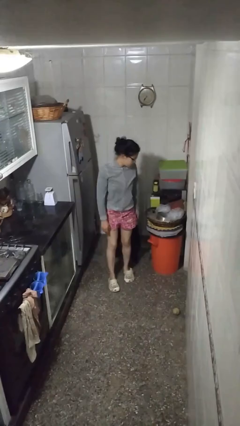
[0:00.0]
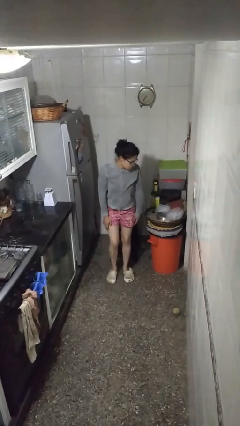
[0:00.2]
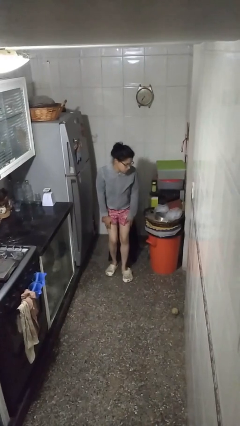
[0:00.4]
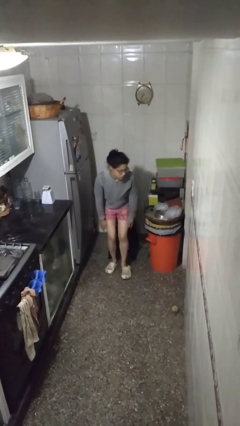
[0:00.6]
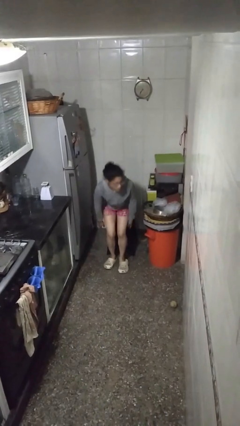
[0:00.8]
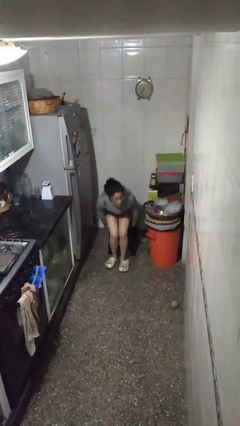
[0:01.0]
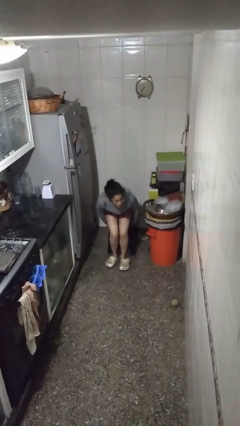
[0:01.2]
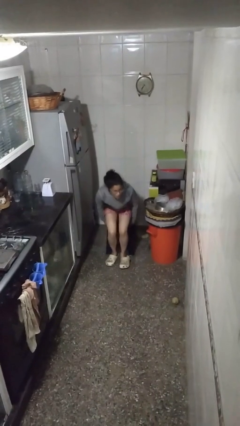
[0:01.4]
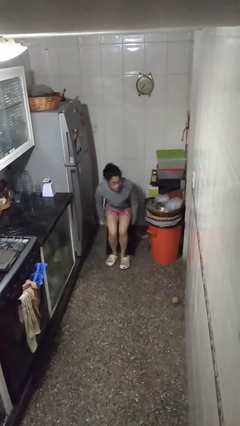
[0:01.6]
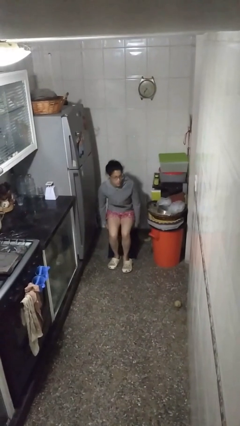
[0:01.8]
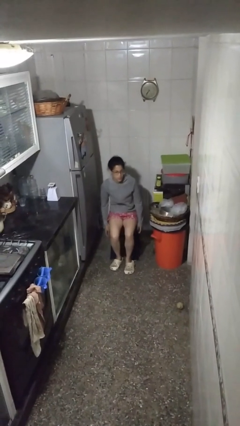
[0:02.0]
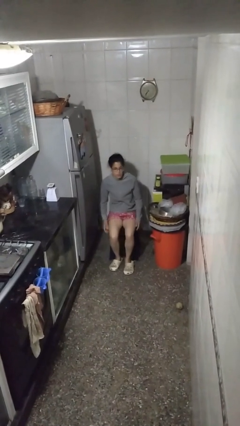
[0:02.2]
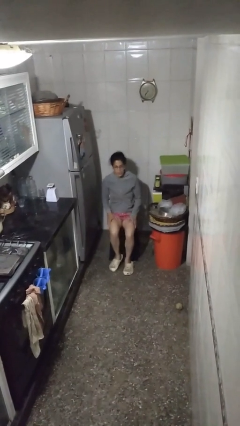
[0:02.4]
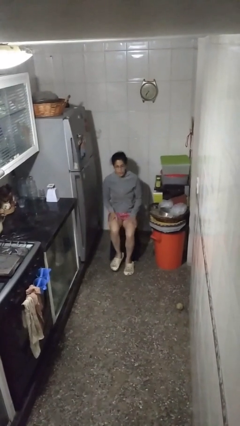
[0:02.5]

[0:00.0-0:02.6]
person sits down

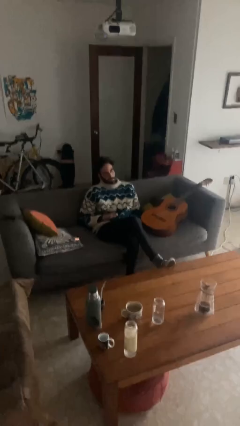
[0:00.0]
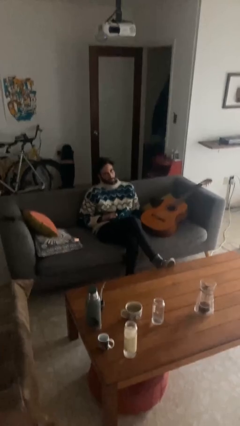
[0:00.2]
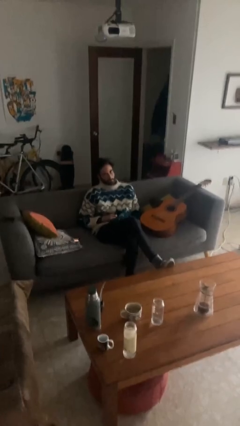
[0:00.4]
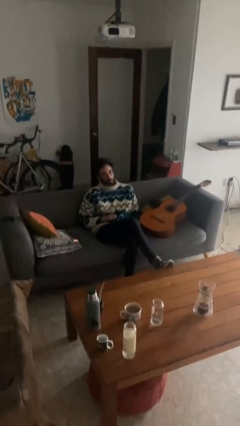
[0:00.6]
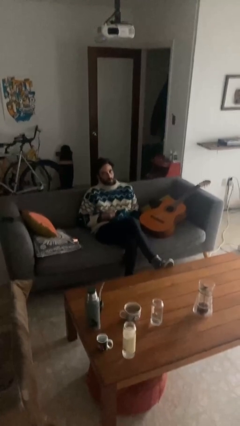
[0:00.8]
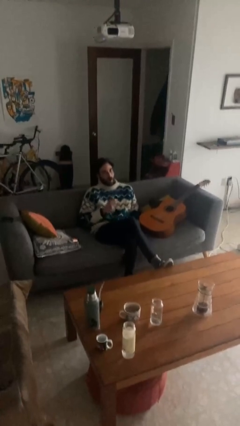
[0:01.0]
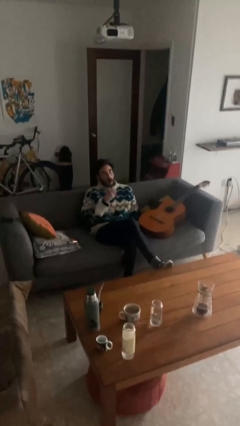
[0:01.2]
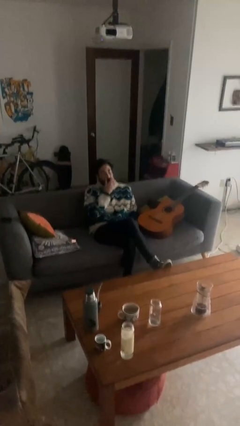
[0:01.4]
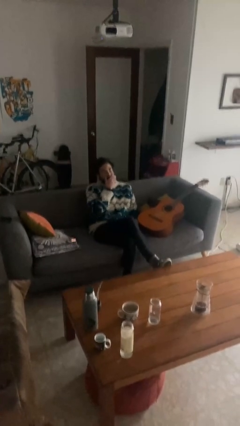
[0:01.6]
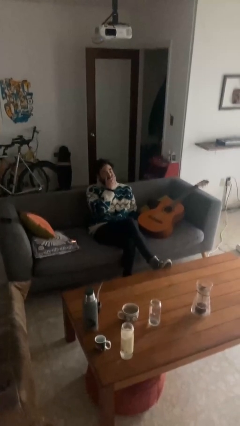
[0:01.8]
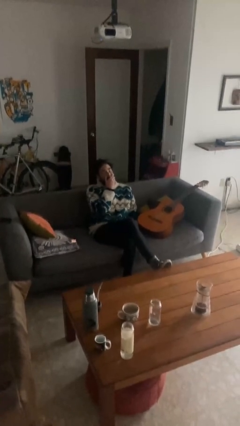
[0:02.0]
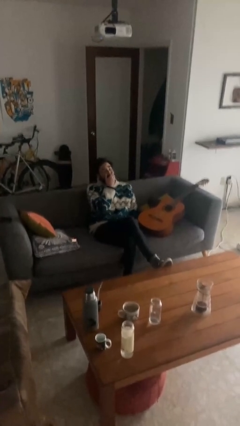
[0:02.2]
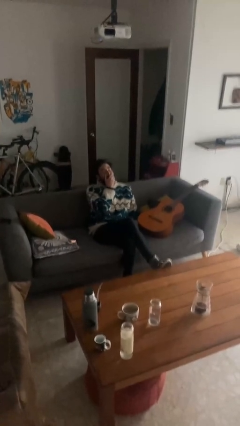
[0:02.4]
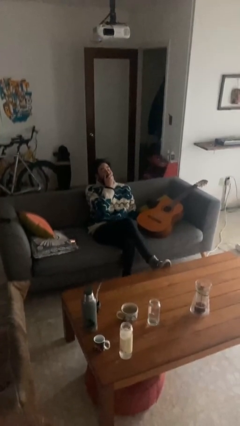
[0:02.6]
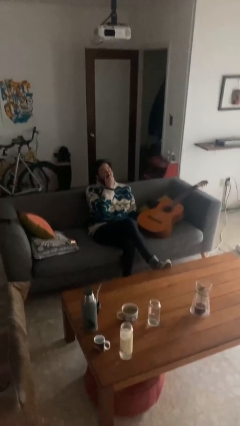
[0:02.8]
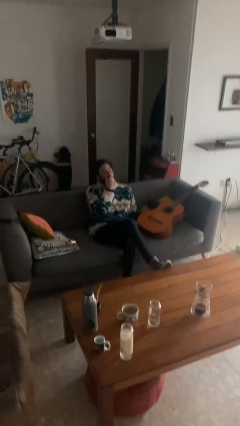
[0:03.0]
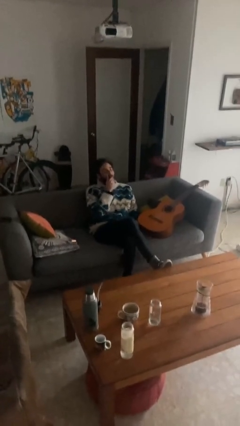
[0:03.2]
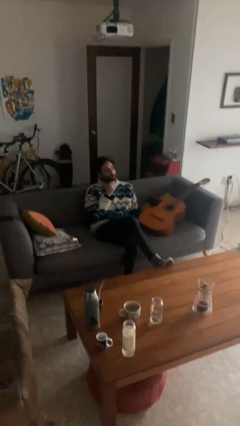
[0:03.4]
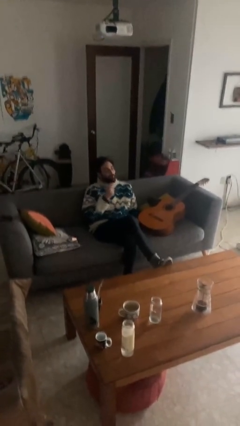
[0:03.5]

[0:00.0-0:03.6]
person yawns

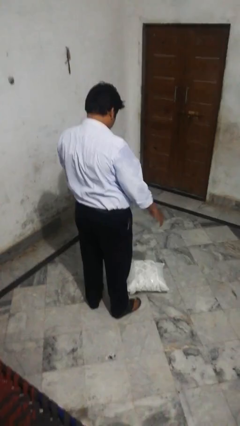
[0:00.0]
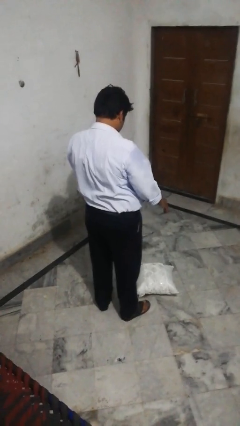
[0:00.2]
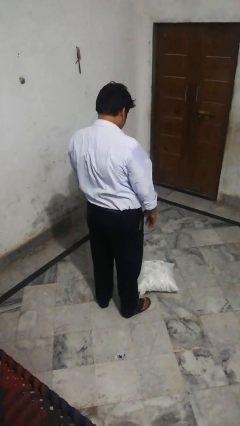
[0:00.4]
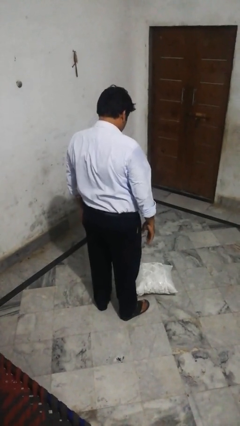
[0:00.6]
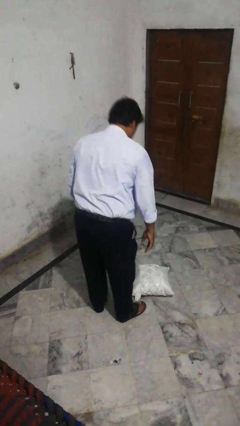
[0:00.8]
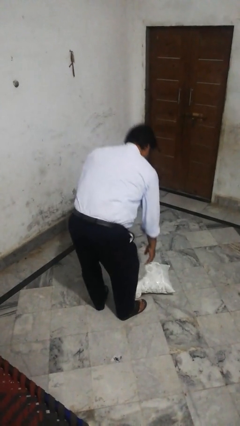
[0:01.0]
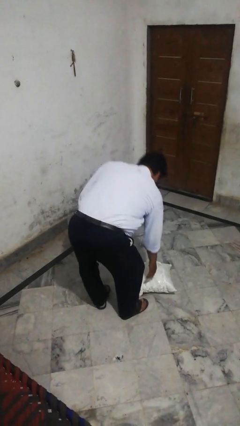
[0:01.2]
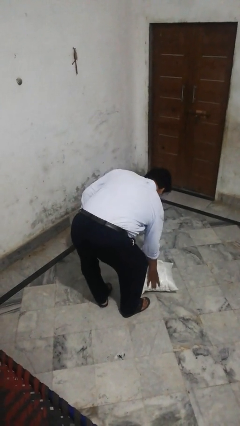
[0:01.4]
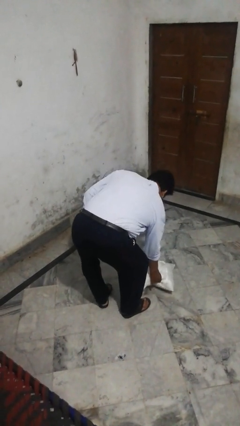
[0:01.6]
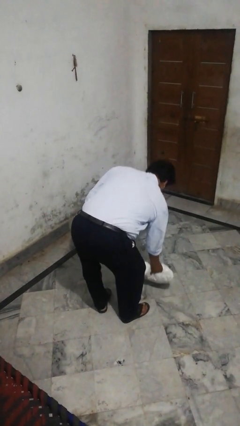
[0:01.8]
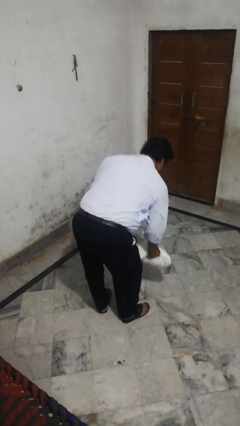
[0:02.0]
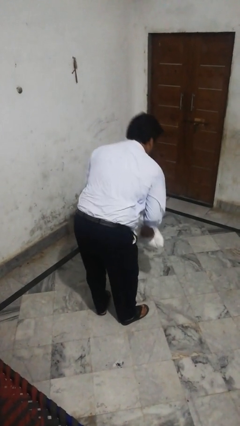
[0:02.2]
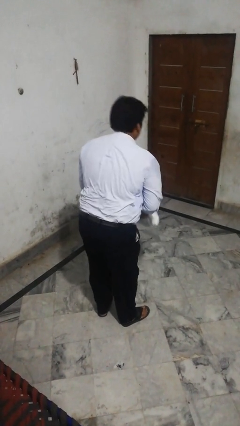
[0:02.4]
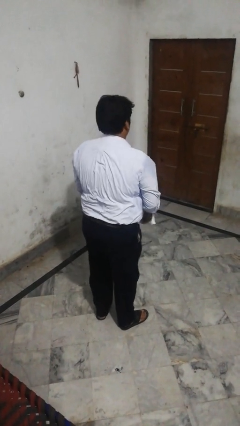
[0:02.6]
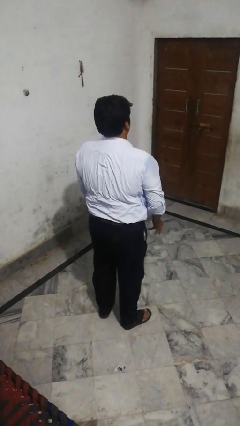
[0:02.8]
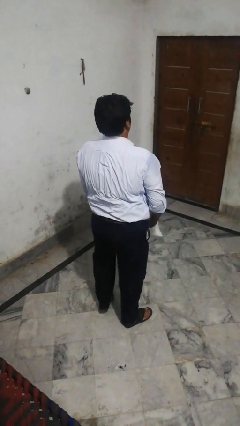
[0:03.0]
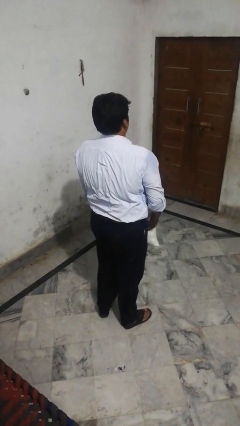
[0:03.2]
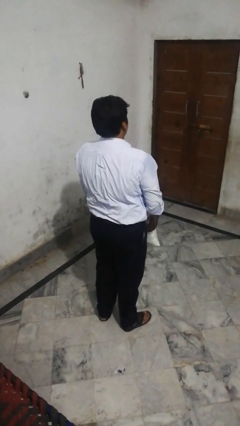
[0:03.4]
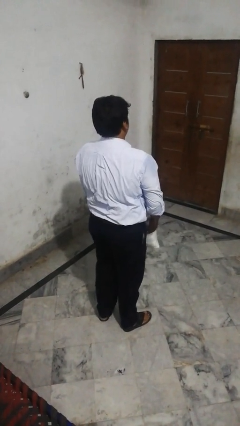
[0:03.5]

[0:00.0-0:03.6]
person picks up object from floor

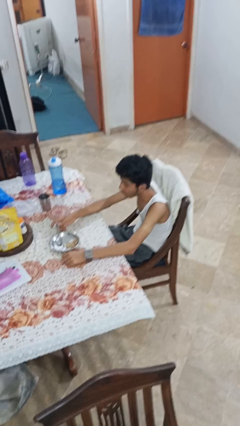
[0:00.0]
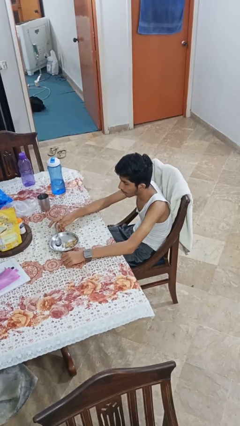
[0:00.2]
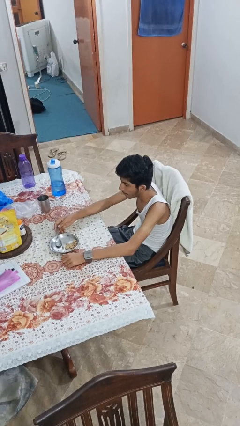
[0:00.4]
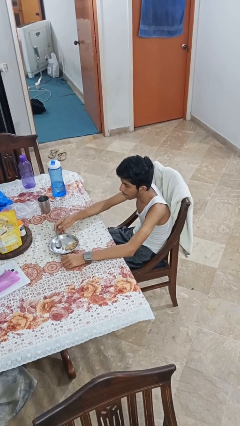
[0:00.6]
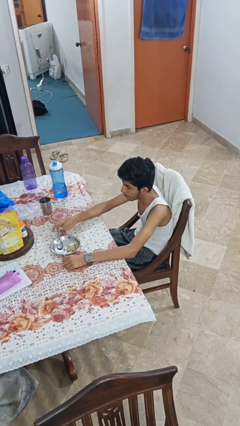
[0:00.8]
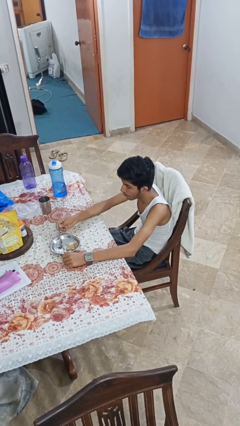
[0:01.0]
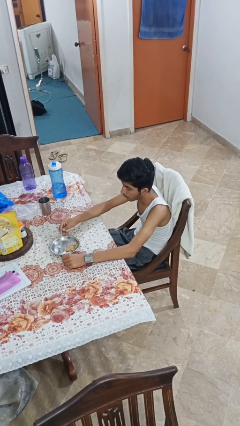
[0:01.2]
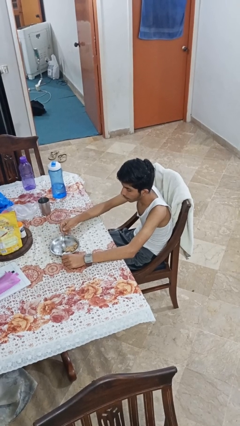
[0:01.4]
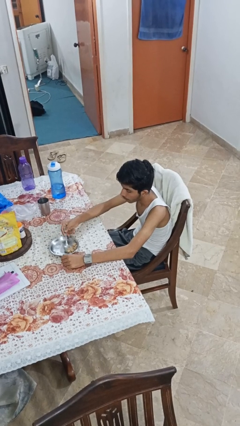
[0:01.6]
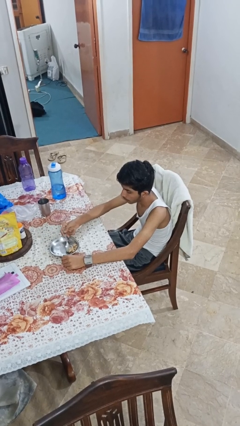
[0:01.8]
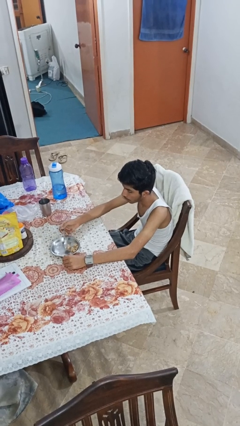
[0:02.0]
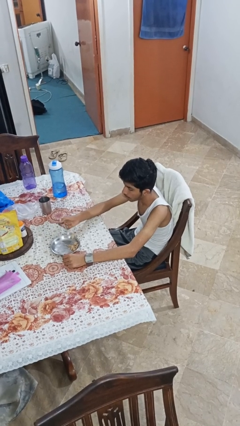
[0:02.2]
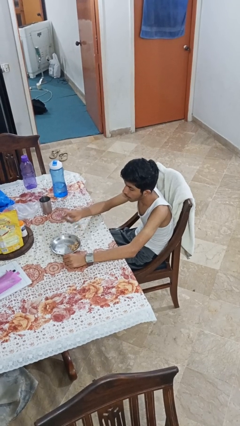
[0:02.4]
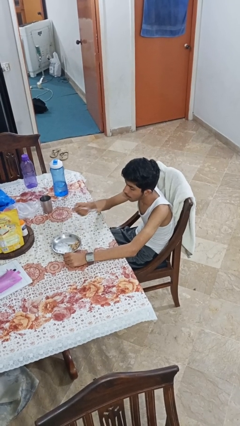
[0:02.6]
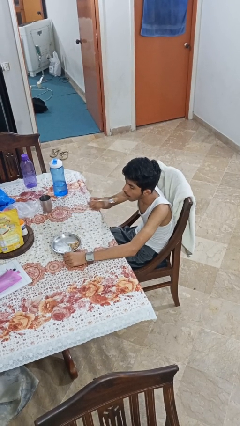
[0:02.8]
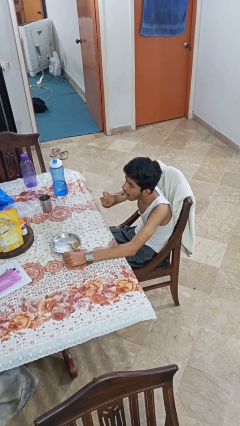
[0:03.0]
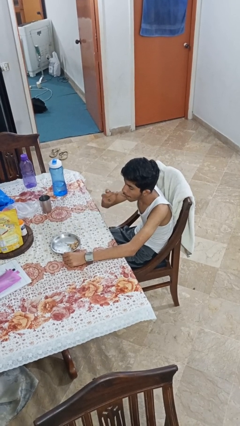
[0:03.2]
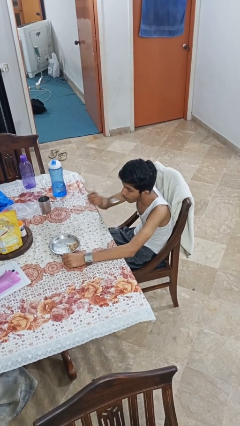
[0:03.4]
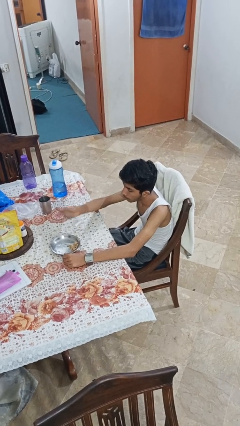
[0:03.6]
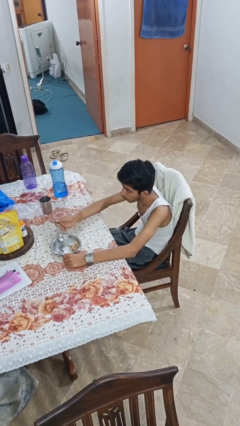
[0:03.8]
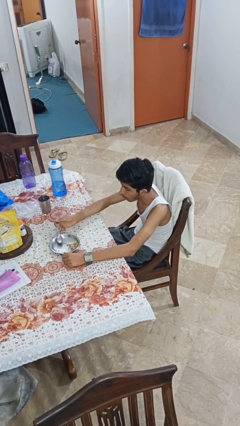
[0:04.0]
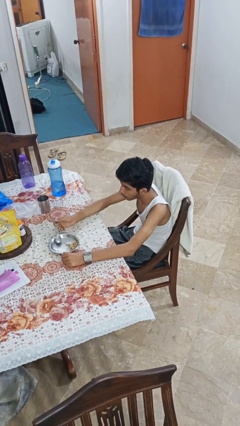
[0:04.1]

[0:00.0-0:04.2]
person eats with utensil

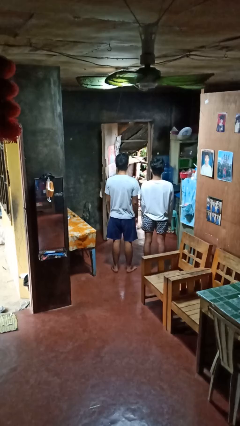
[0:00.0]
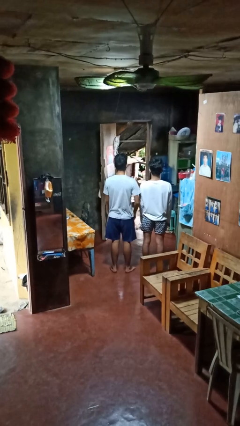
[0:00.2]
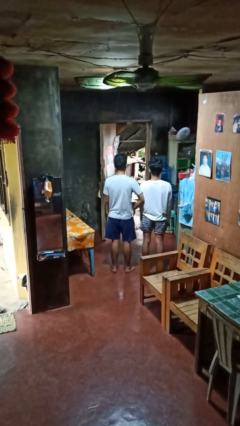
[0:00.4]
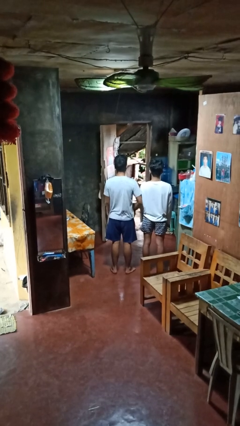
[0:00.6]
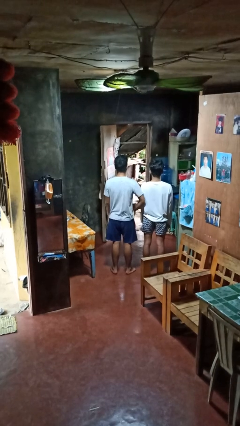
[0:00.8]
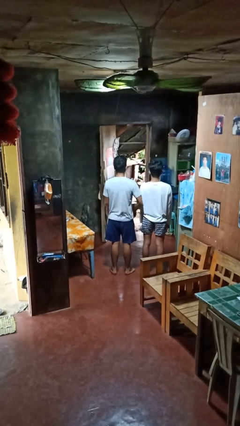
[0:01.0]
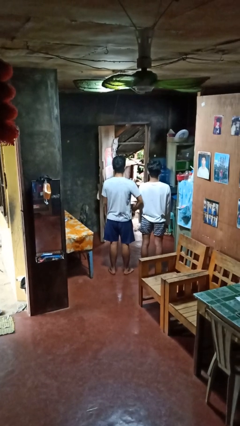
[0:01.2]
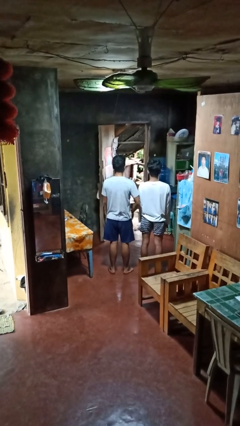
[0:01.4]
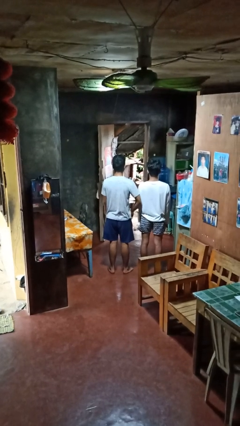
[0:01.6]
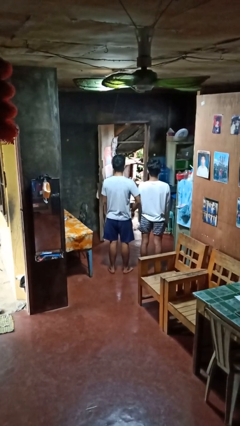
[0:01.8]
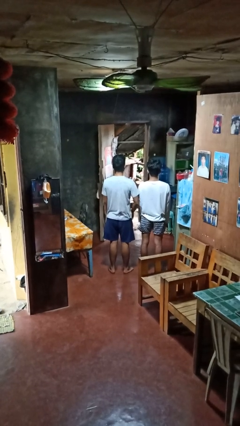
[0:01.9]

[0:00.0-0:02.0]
person nudges person with elbow

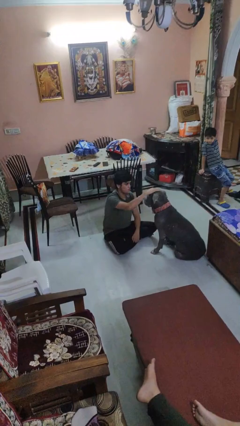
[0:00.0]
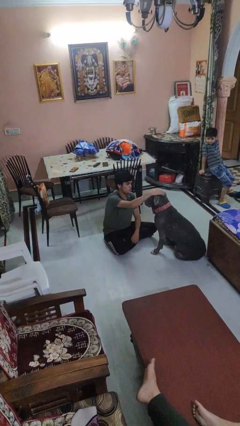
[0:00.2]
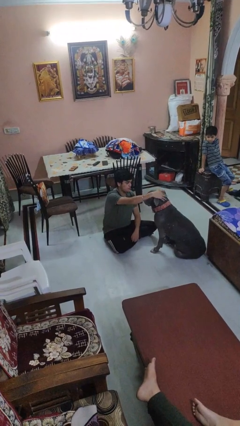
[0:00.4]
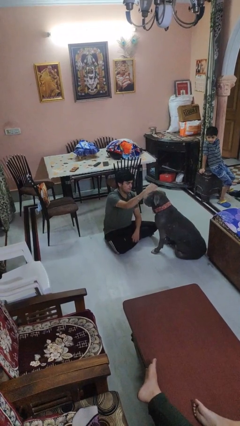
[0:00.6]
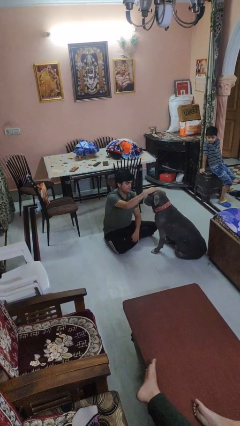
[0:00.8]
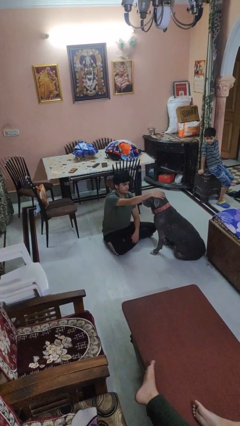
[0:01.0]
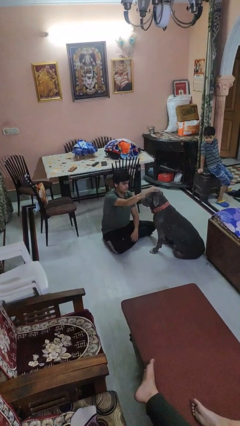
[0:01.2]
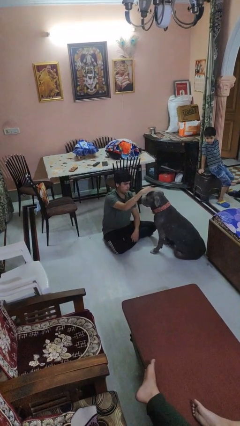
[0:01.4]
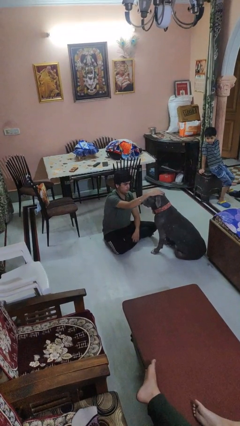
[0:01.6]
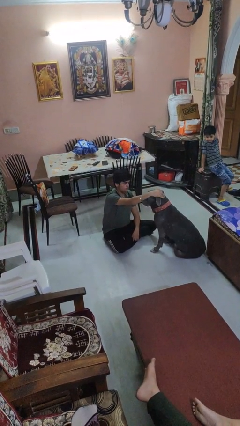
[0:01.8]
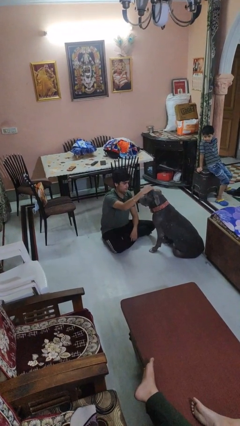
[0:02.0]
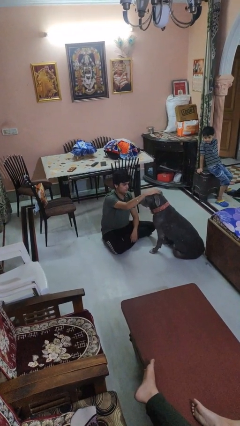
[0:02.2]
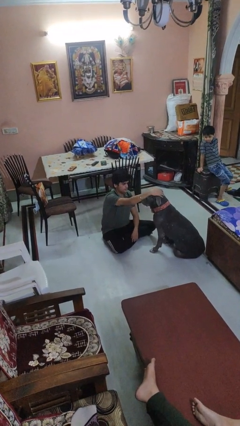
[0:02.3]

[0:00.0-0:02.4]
person pets dog
